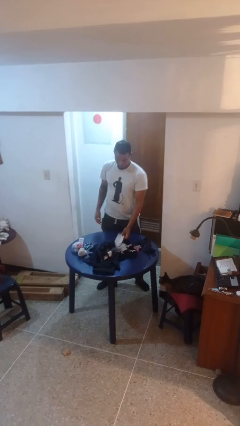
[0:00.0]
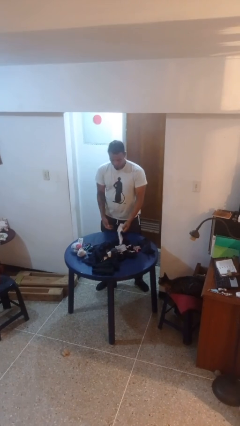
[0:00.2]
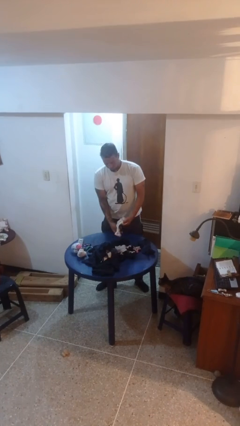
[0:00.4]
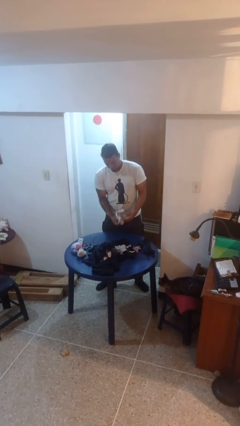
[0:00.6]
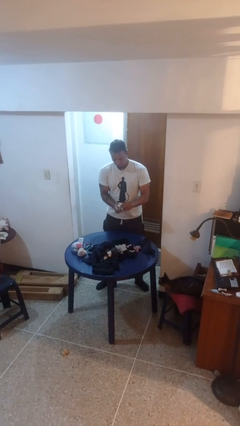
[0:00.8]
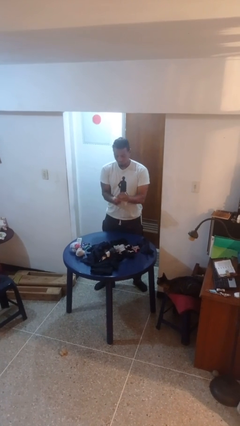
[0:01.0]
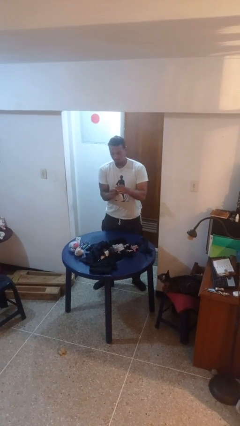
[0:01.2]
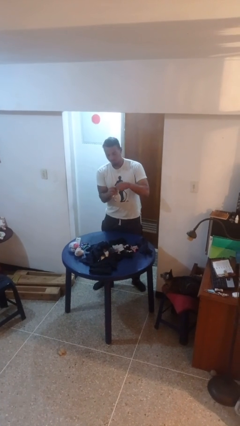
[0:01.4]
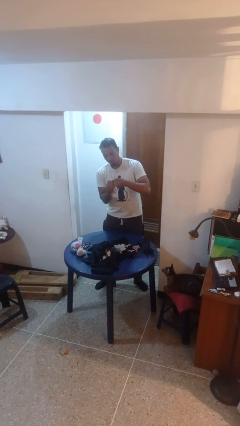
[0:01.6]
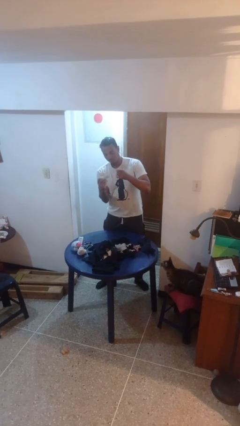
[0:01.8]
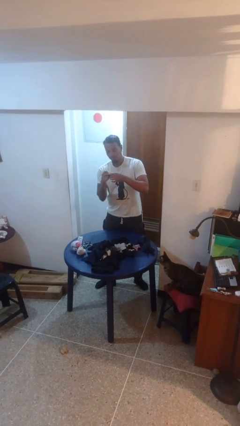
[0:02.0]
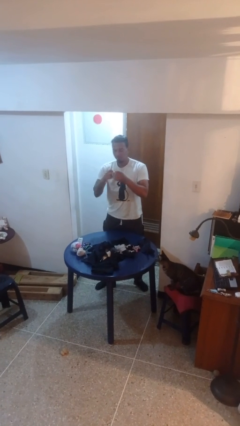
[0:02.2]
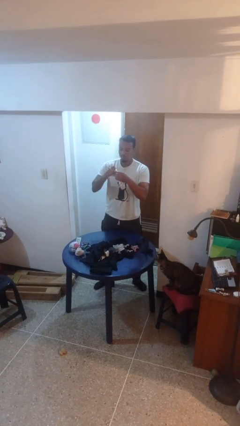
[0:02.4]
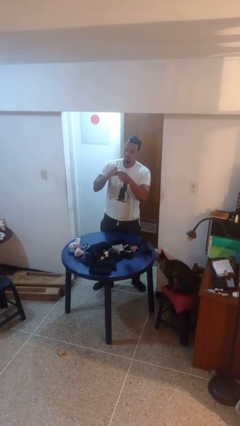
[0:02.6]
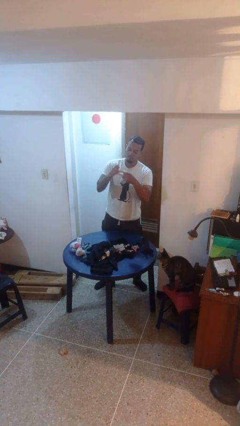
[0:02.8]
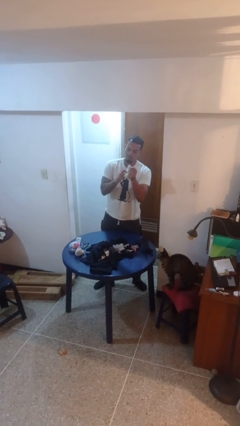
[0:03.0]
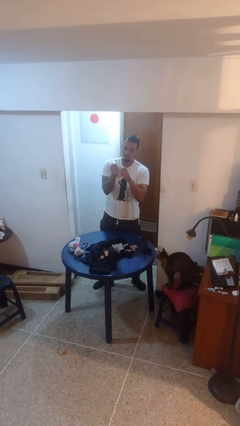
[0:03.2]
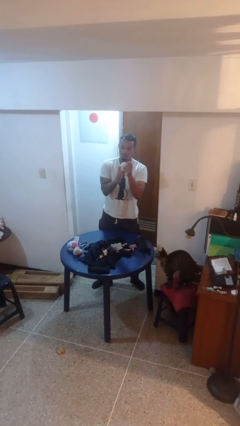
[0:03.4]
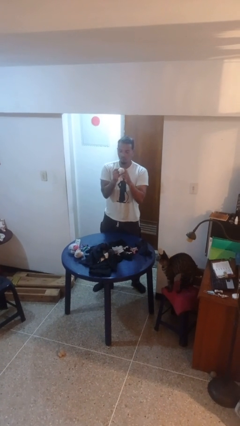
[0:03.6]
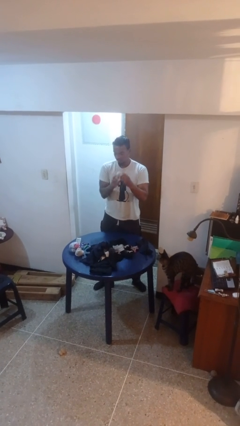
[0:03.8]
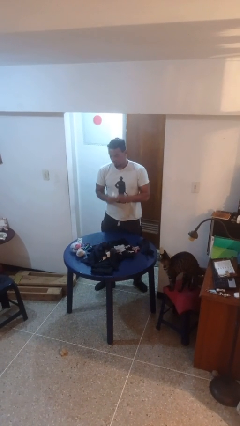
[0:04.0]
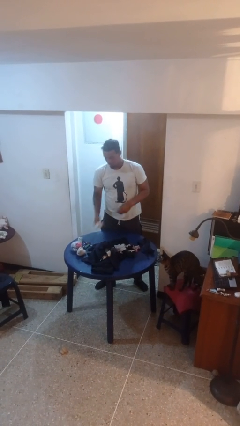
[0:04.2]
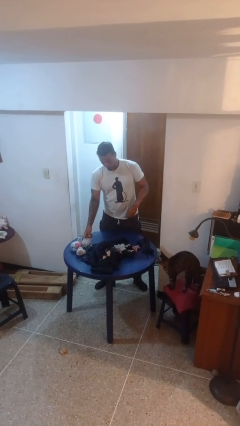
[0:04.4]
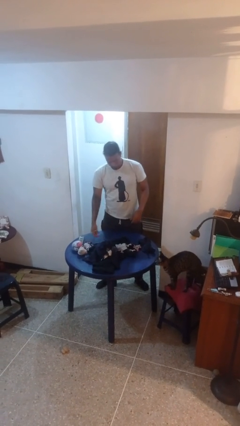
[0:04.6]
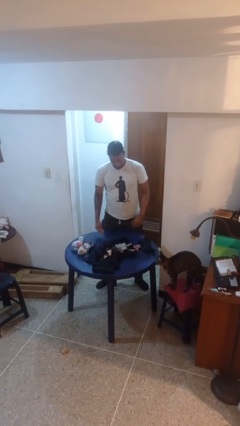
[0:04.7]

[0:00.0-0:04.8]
person folds socks

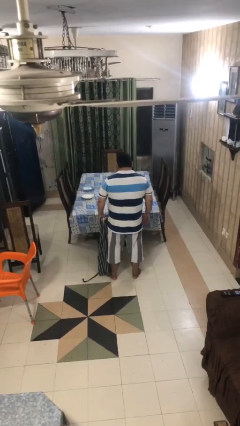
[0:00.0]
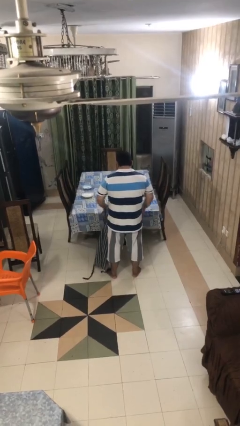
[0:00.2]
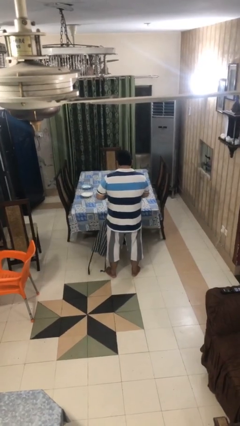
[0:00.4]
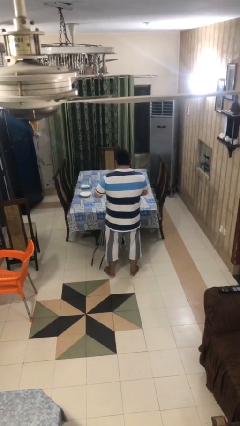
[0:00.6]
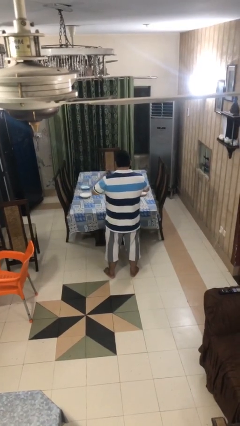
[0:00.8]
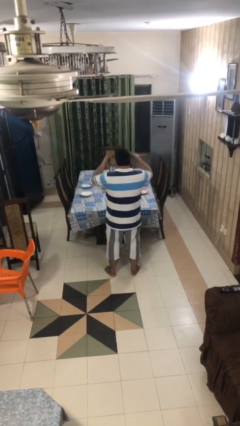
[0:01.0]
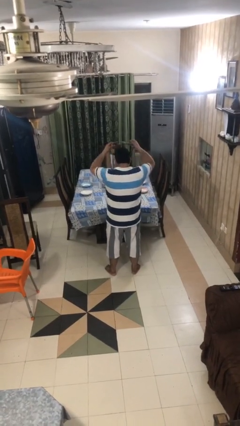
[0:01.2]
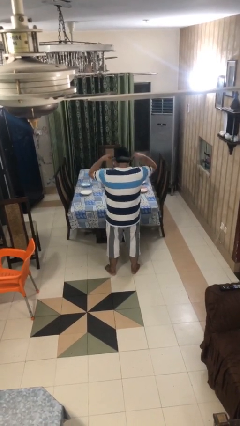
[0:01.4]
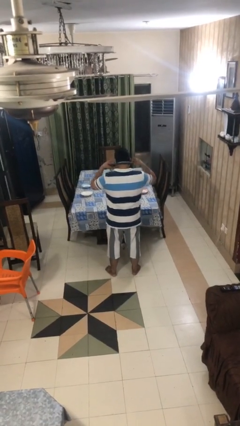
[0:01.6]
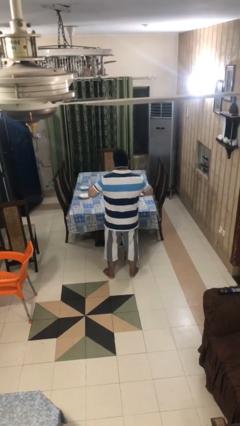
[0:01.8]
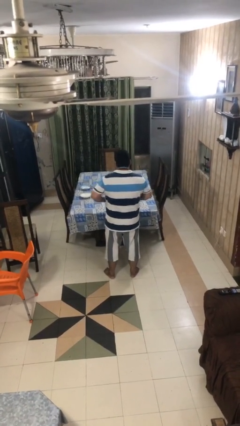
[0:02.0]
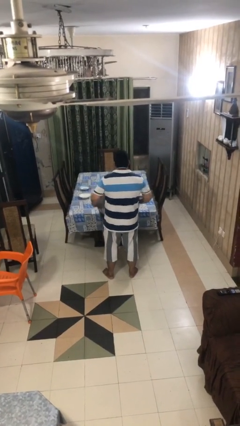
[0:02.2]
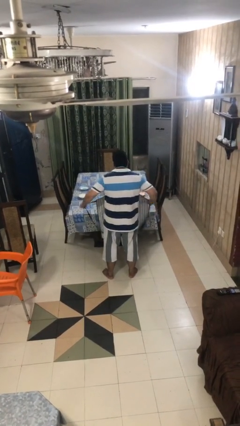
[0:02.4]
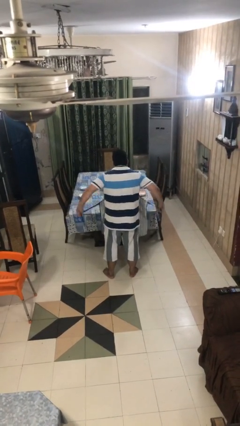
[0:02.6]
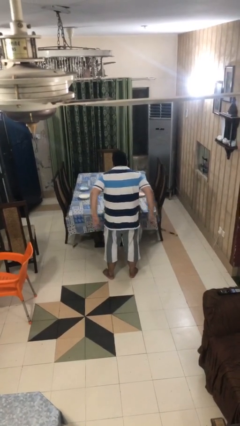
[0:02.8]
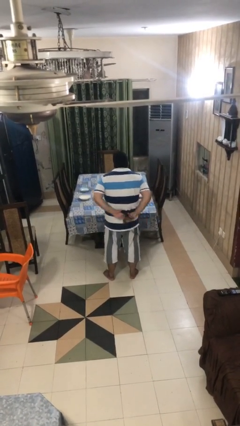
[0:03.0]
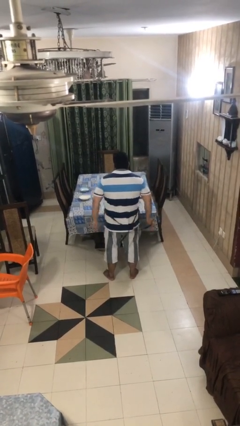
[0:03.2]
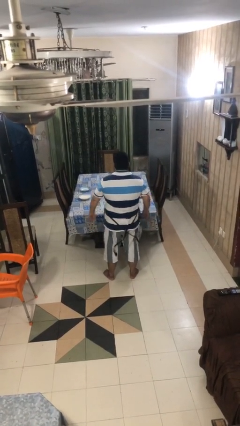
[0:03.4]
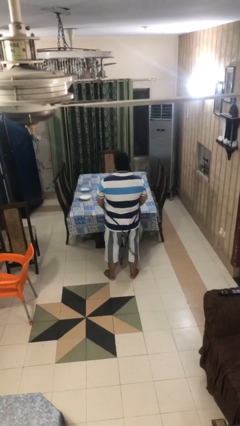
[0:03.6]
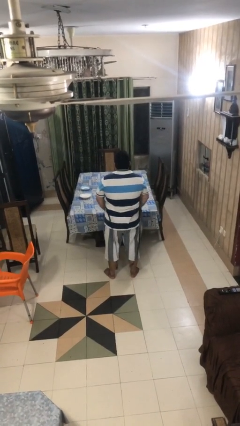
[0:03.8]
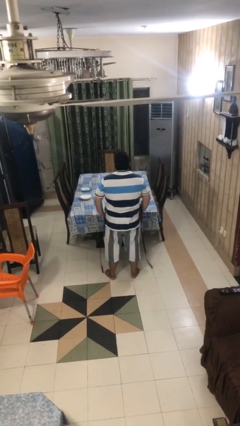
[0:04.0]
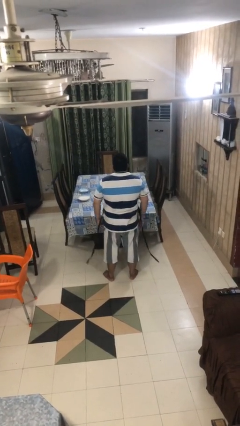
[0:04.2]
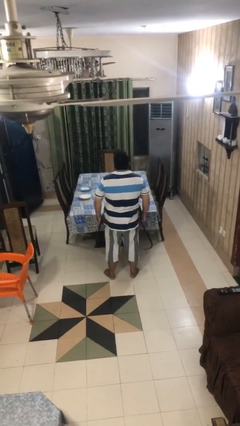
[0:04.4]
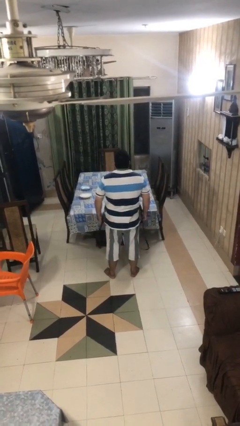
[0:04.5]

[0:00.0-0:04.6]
person puts on apron

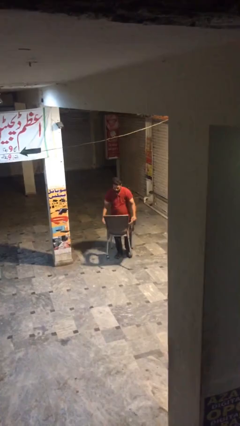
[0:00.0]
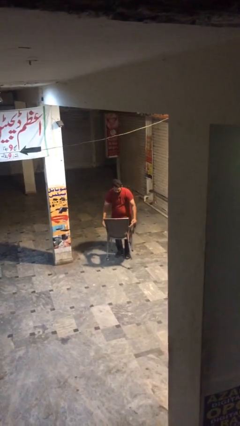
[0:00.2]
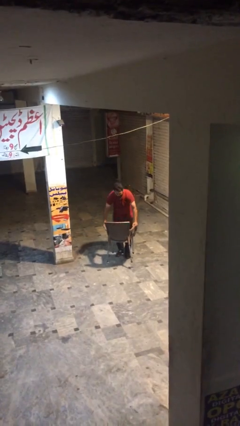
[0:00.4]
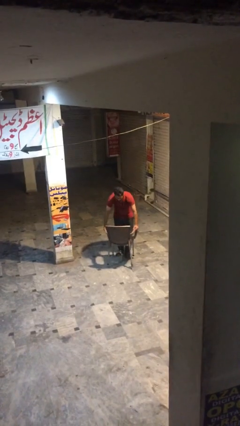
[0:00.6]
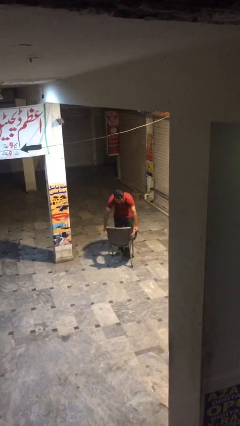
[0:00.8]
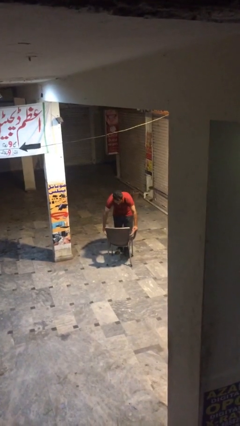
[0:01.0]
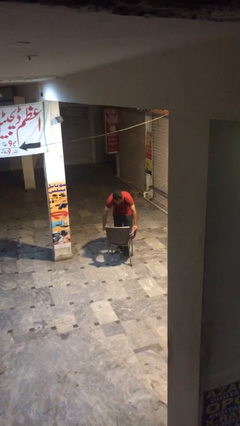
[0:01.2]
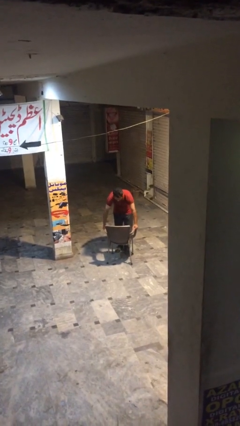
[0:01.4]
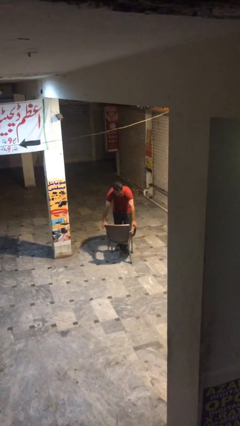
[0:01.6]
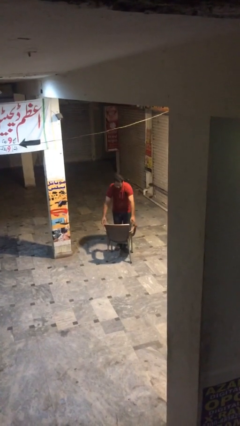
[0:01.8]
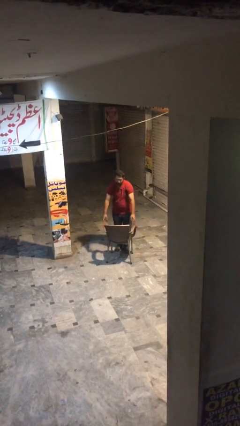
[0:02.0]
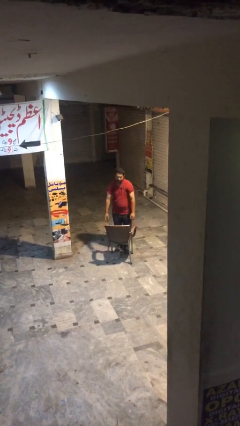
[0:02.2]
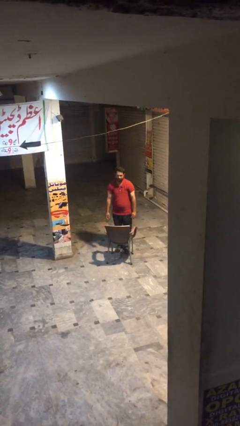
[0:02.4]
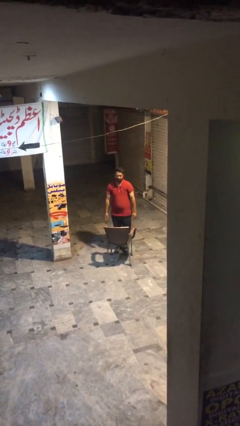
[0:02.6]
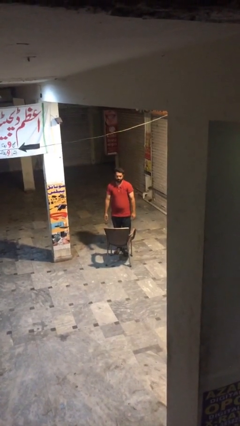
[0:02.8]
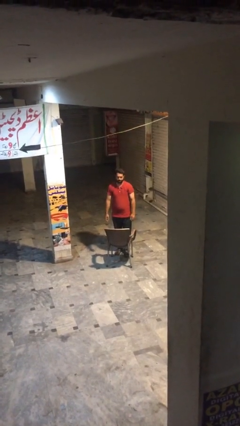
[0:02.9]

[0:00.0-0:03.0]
person puts down object on floor

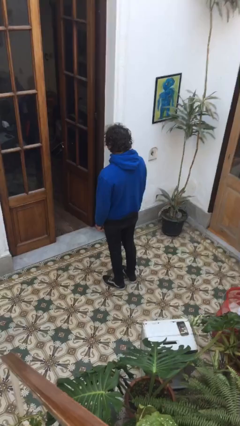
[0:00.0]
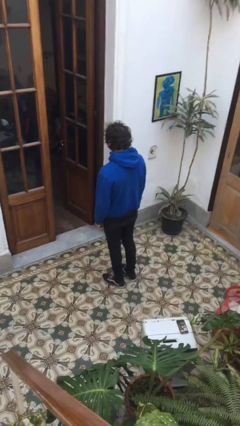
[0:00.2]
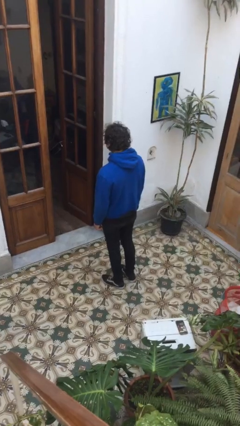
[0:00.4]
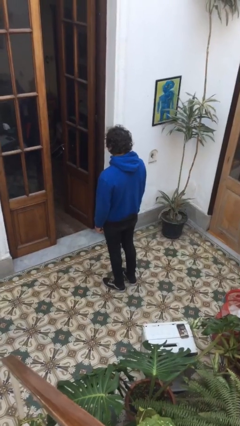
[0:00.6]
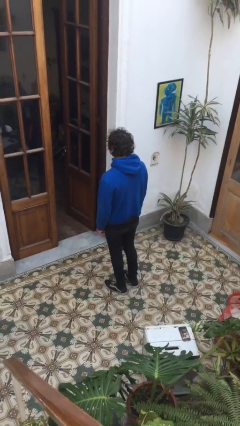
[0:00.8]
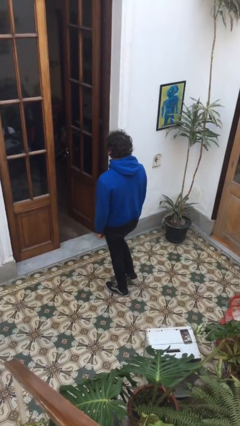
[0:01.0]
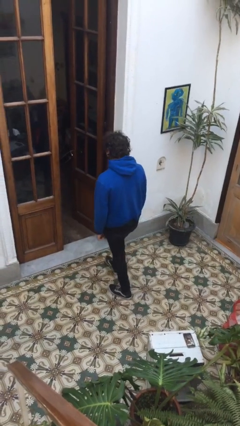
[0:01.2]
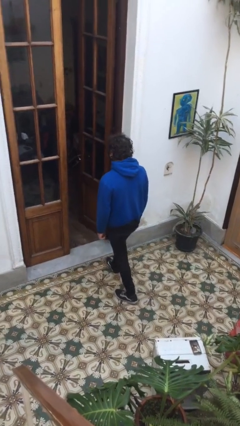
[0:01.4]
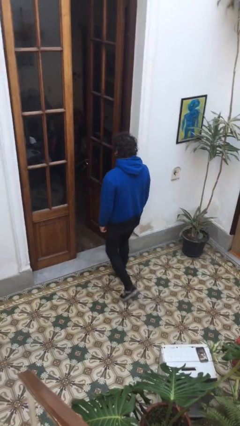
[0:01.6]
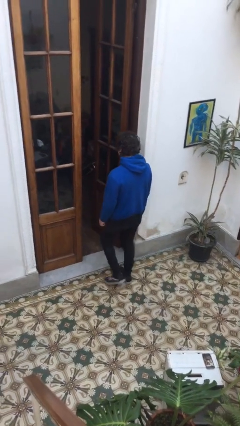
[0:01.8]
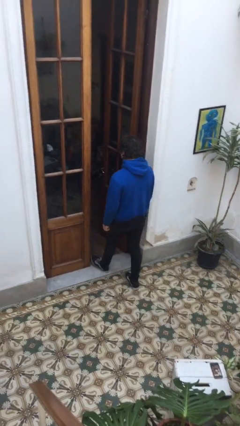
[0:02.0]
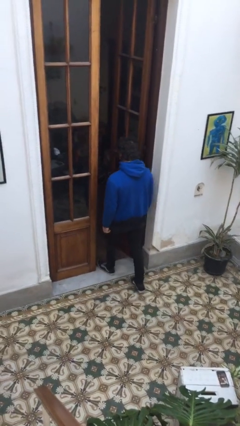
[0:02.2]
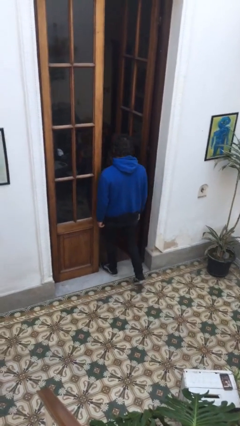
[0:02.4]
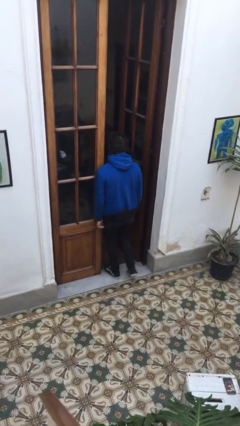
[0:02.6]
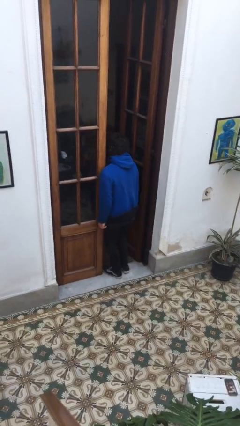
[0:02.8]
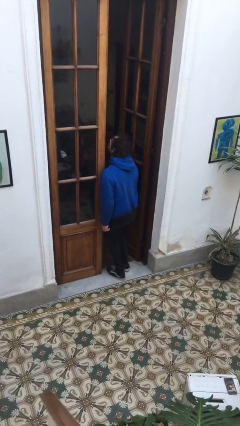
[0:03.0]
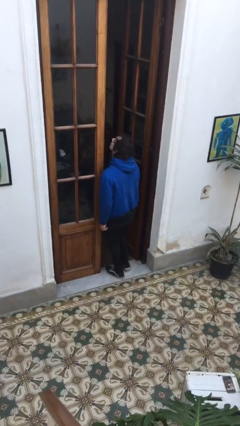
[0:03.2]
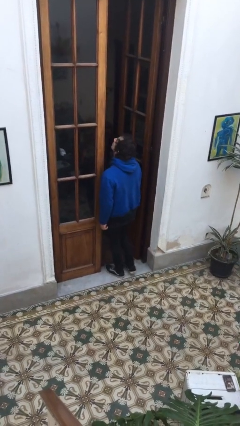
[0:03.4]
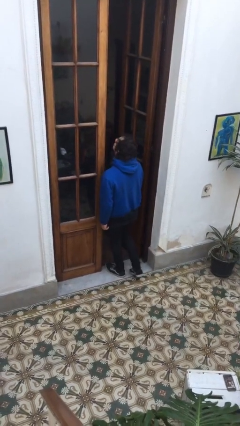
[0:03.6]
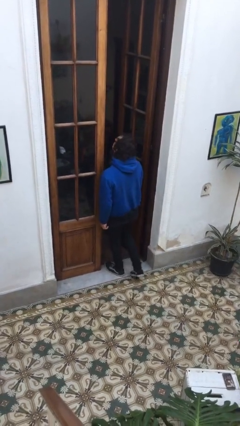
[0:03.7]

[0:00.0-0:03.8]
person bumps into wall

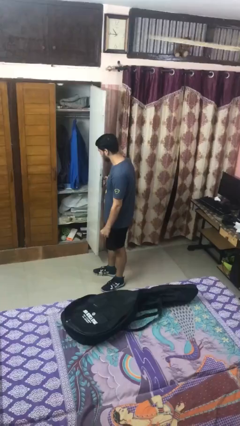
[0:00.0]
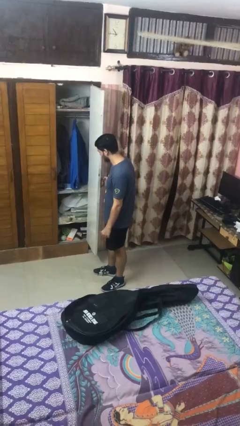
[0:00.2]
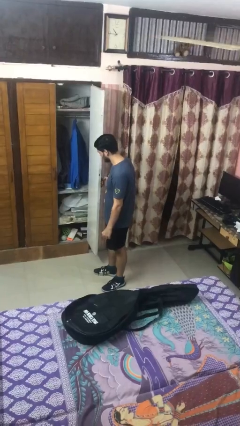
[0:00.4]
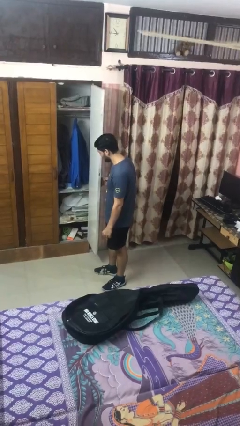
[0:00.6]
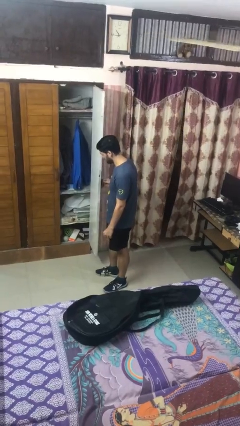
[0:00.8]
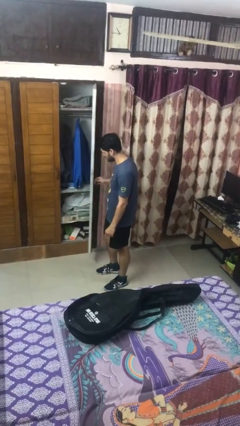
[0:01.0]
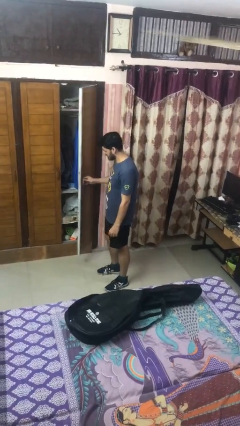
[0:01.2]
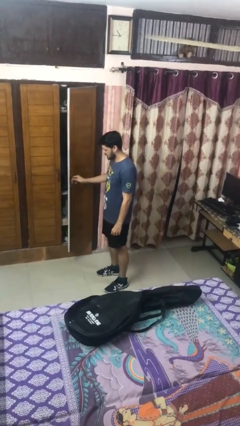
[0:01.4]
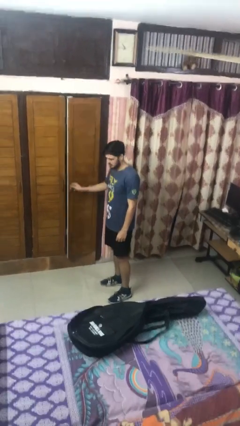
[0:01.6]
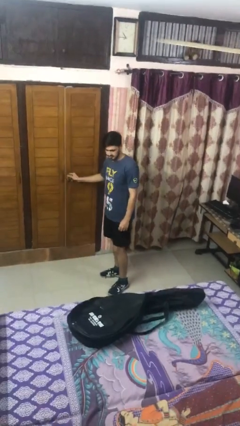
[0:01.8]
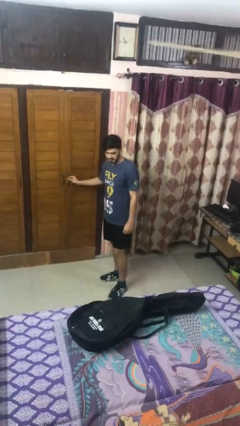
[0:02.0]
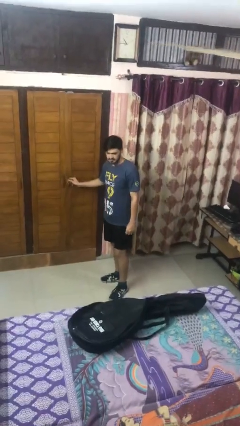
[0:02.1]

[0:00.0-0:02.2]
person closes closet door
